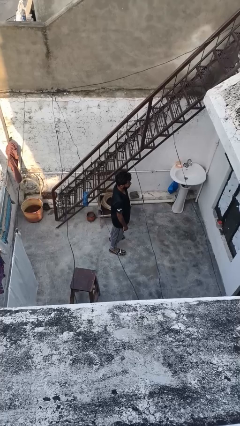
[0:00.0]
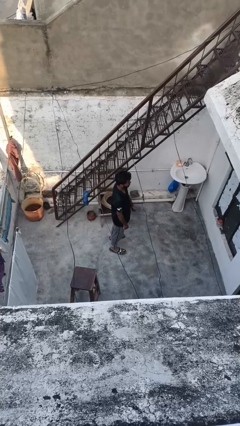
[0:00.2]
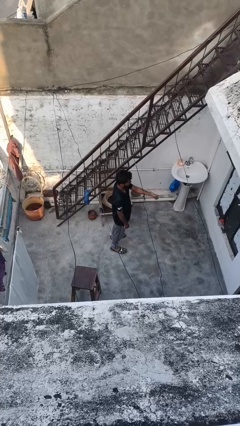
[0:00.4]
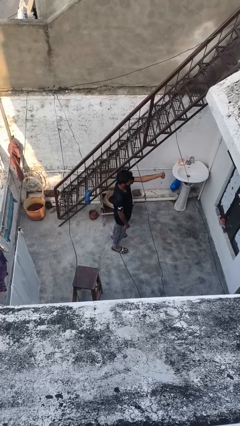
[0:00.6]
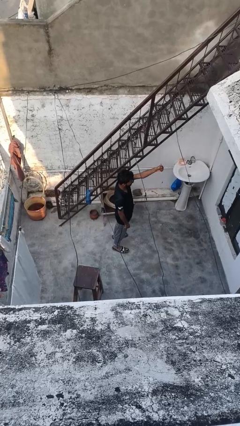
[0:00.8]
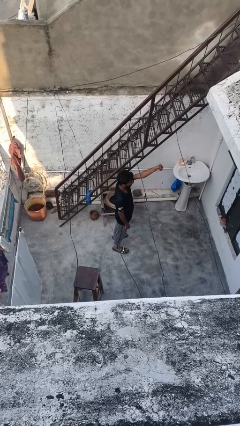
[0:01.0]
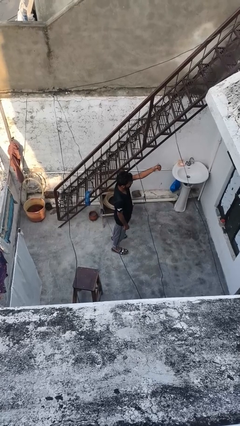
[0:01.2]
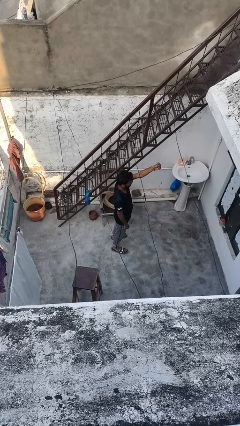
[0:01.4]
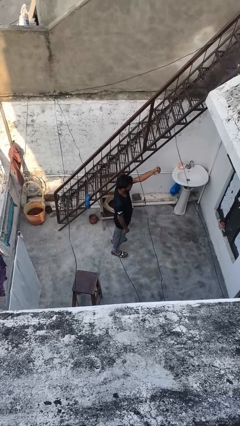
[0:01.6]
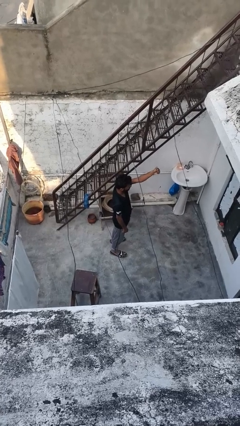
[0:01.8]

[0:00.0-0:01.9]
person gestures thumbs up

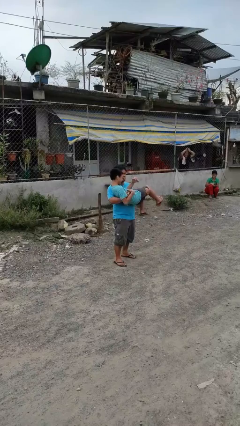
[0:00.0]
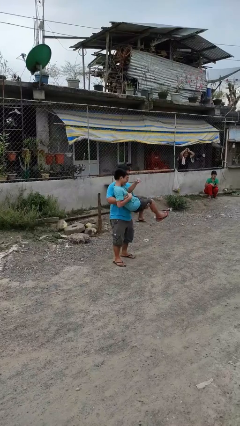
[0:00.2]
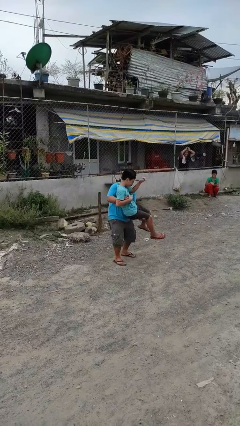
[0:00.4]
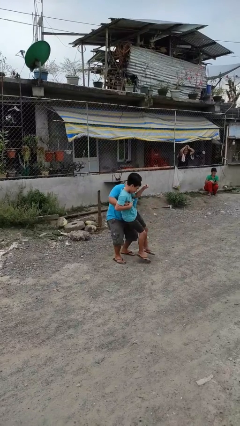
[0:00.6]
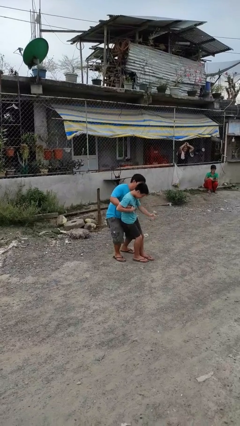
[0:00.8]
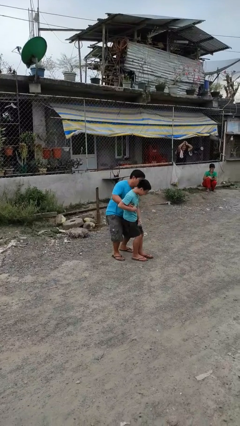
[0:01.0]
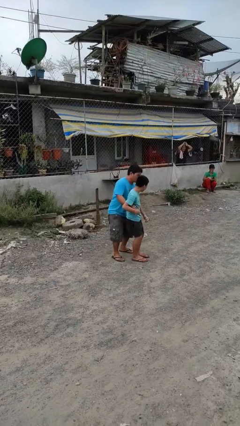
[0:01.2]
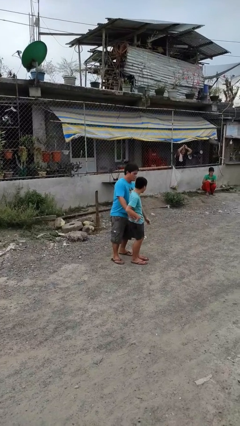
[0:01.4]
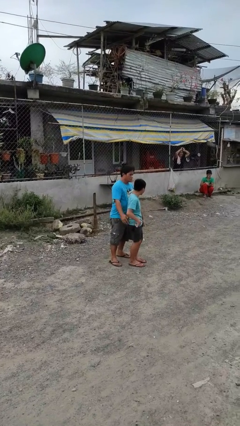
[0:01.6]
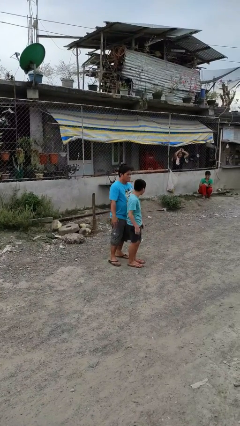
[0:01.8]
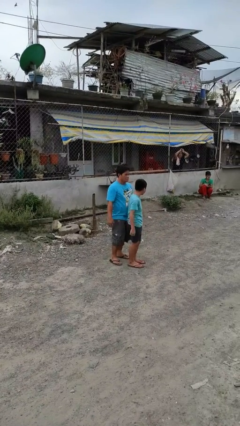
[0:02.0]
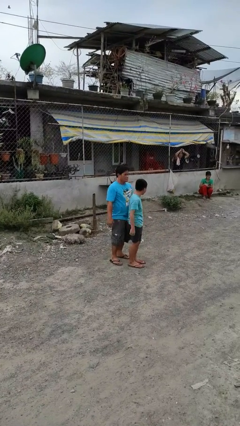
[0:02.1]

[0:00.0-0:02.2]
person puts down person

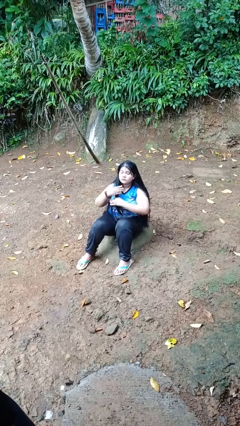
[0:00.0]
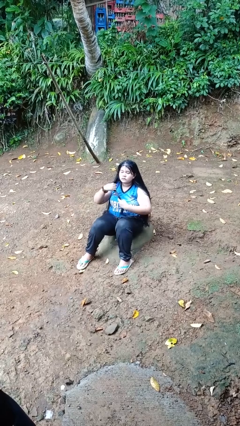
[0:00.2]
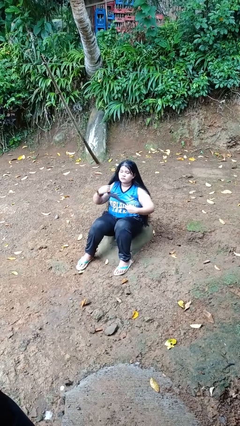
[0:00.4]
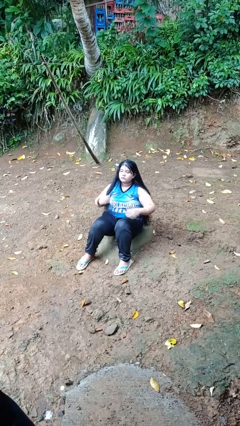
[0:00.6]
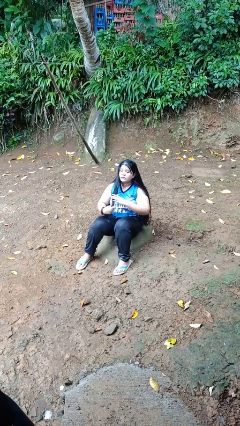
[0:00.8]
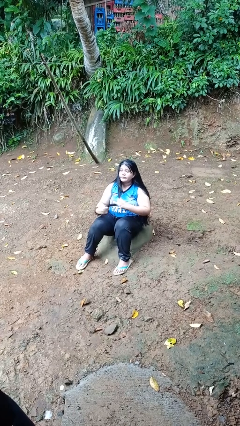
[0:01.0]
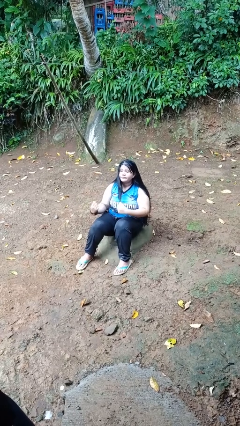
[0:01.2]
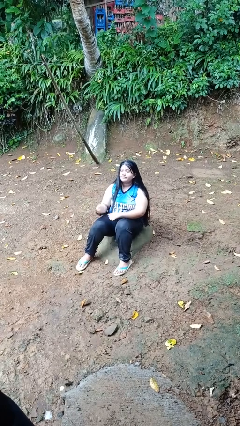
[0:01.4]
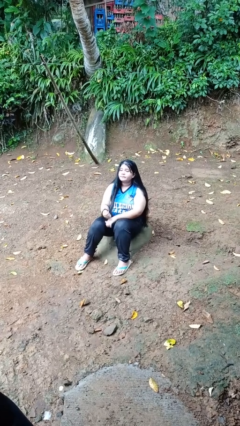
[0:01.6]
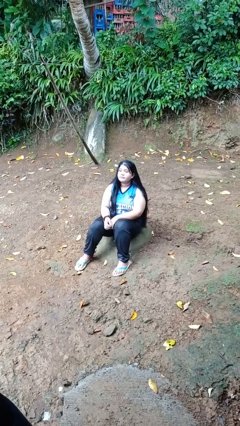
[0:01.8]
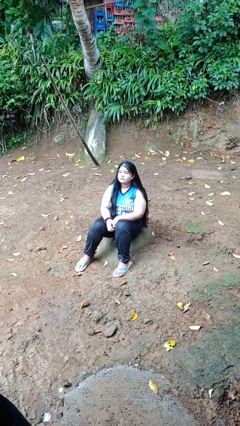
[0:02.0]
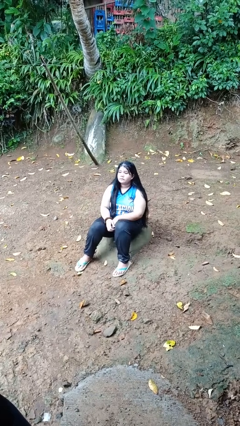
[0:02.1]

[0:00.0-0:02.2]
person strokes hair

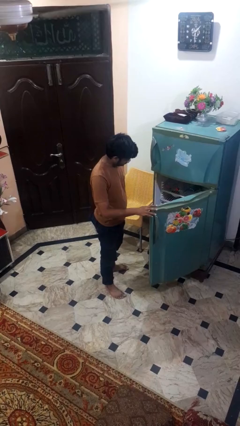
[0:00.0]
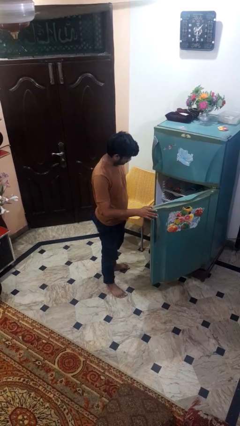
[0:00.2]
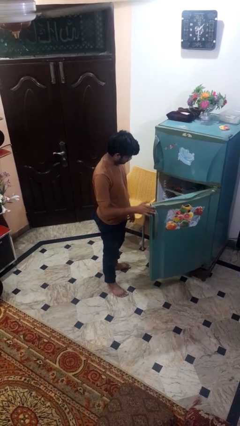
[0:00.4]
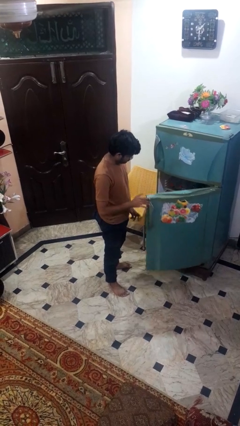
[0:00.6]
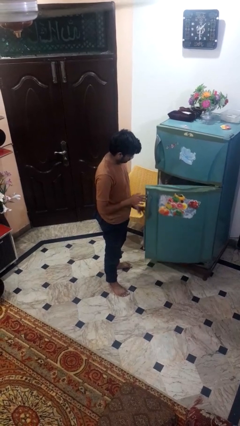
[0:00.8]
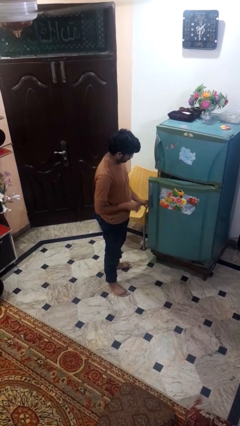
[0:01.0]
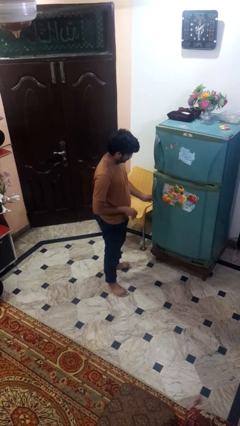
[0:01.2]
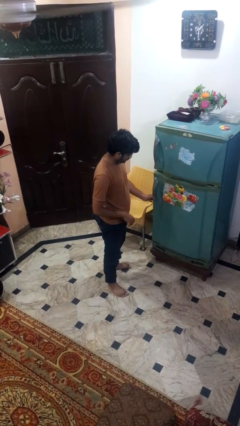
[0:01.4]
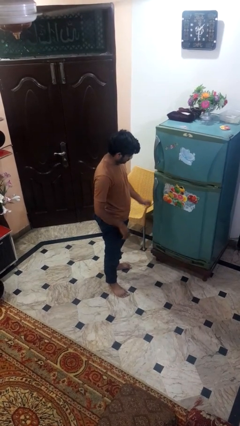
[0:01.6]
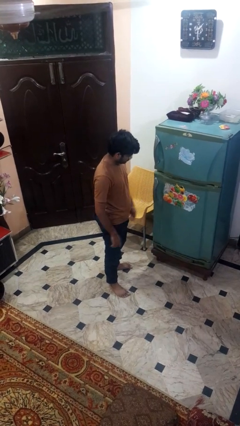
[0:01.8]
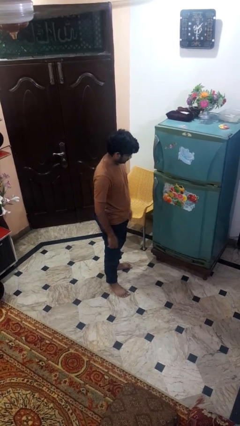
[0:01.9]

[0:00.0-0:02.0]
person closes refrigerator

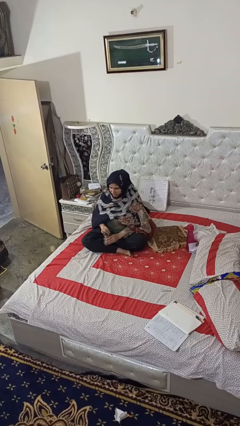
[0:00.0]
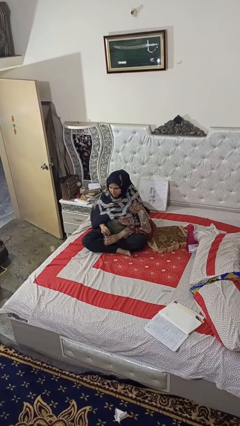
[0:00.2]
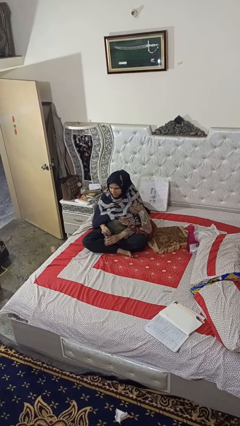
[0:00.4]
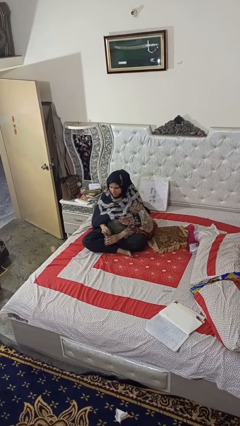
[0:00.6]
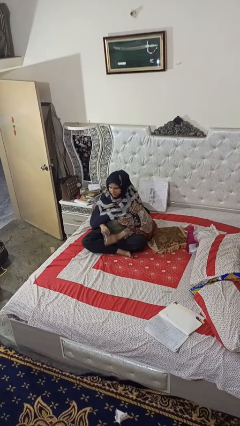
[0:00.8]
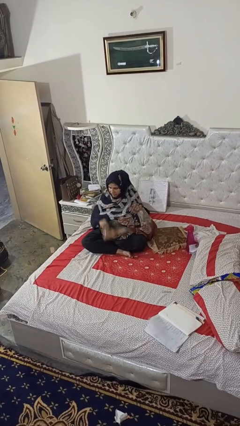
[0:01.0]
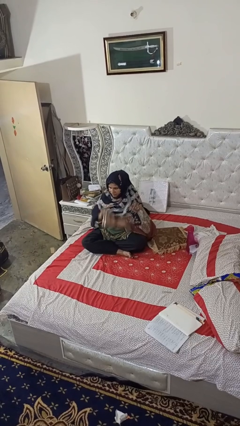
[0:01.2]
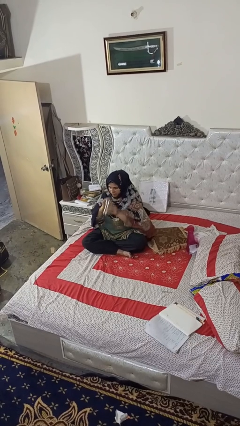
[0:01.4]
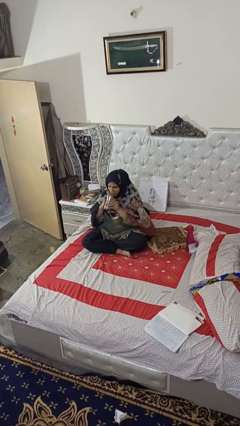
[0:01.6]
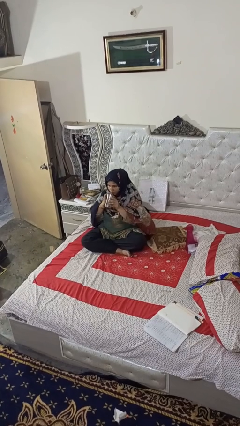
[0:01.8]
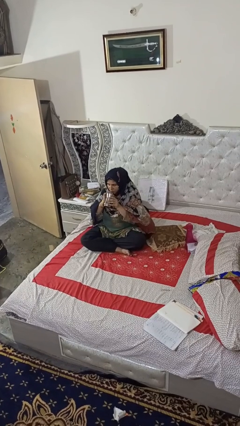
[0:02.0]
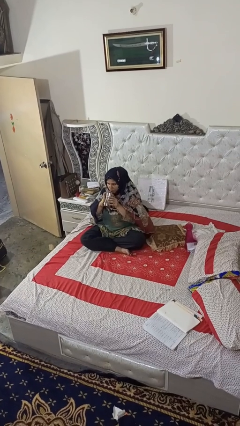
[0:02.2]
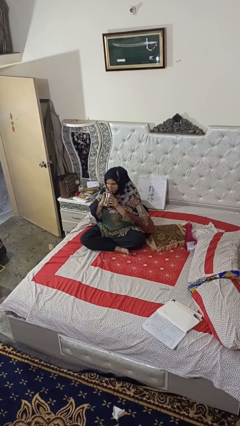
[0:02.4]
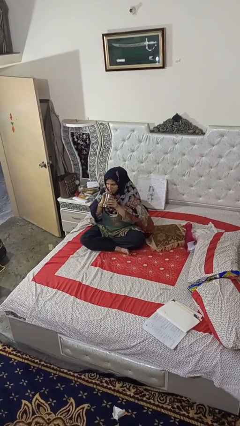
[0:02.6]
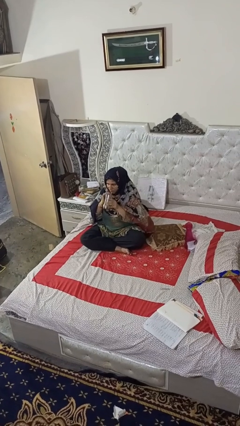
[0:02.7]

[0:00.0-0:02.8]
person drinks from straw

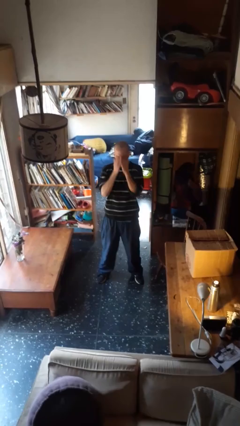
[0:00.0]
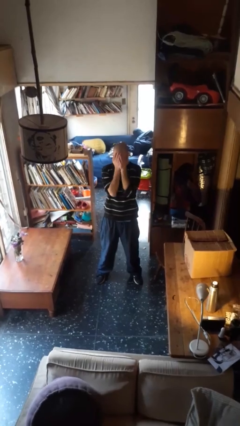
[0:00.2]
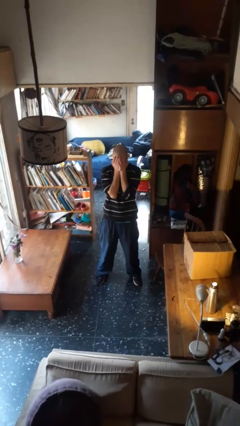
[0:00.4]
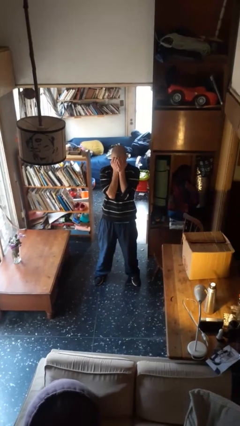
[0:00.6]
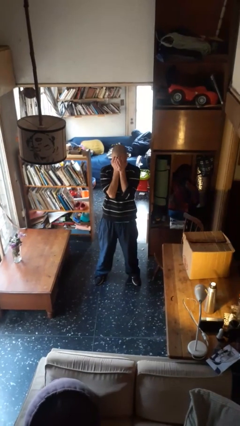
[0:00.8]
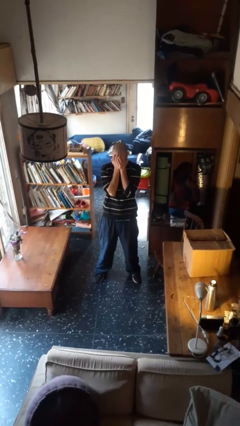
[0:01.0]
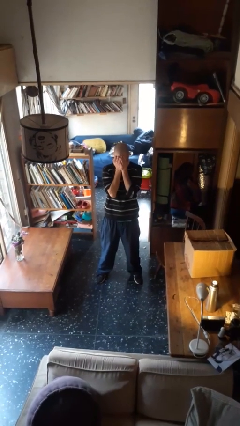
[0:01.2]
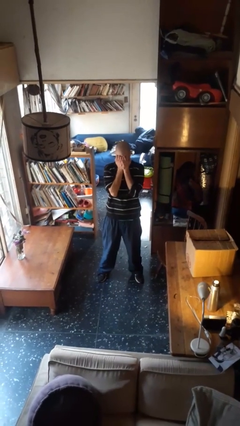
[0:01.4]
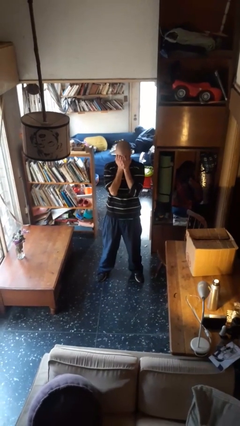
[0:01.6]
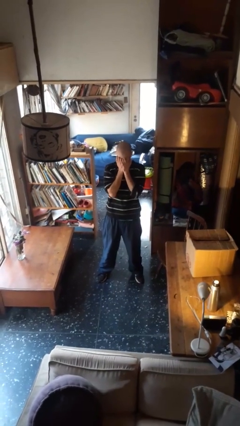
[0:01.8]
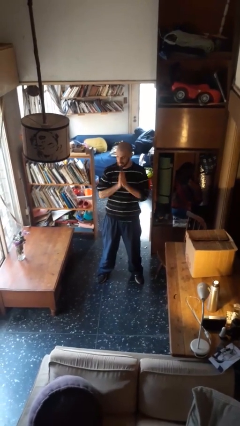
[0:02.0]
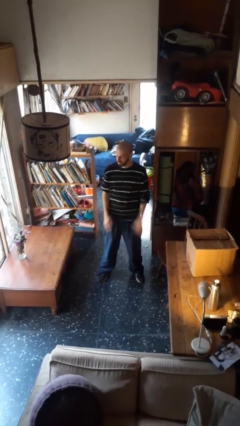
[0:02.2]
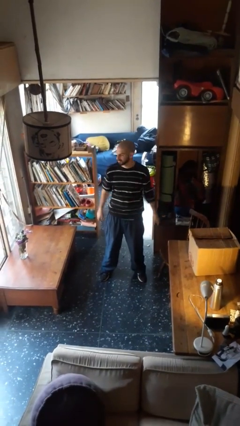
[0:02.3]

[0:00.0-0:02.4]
person covers face with hands

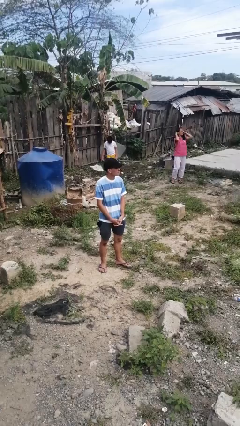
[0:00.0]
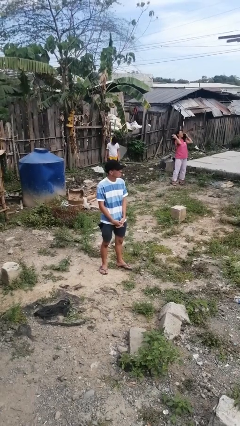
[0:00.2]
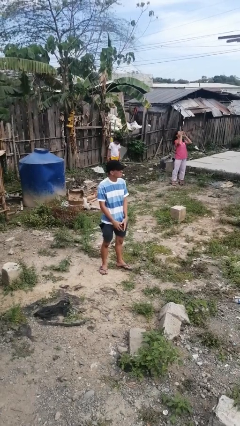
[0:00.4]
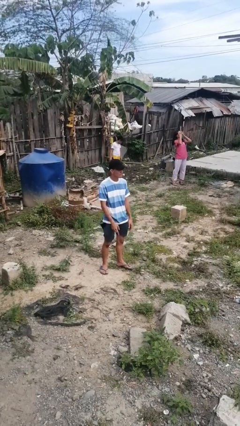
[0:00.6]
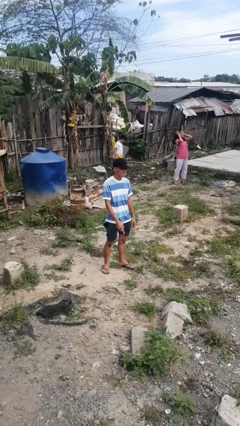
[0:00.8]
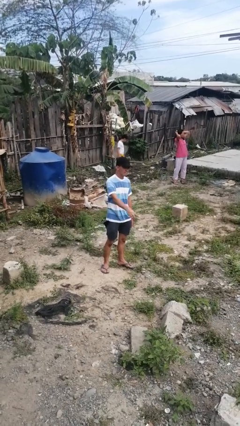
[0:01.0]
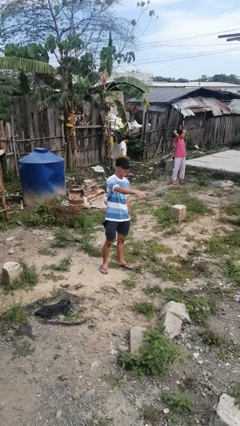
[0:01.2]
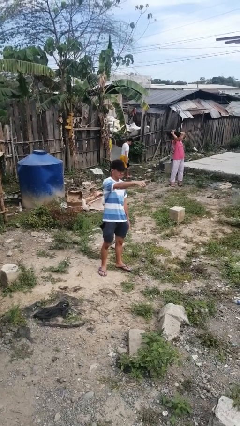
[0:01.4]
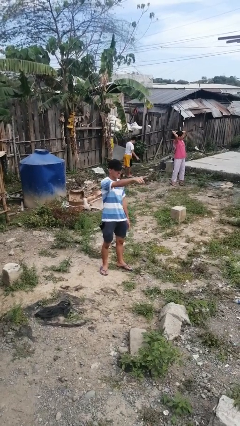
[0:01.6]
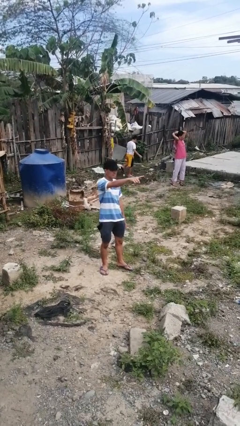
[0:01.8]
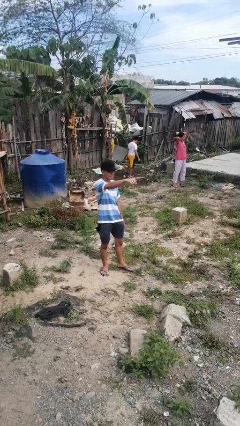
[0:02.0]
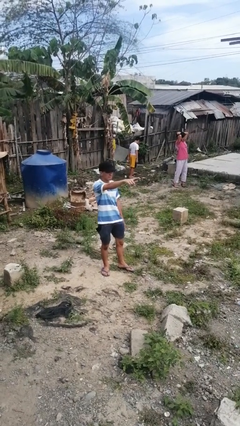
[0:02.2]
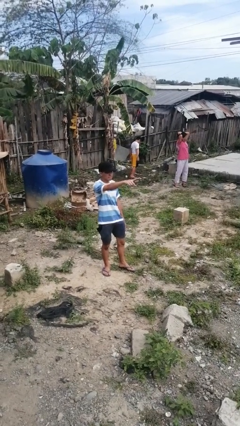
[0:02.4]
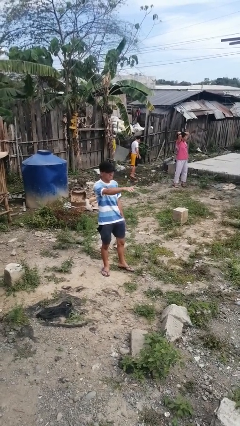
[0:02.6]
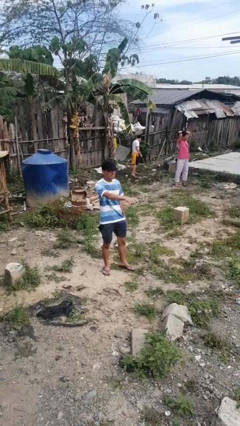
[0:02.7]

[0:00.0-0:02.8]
person points at person

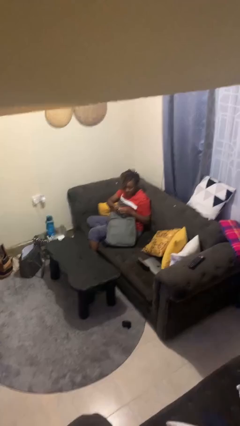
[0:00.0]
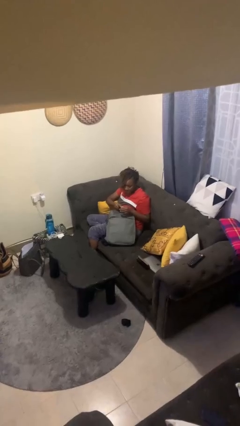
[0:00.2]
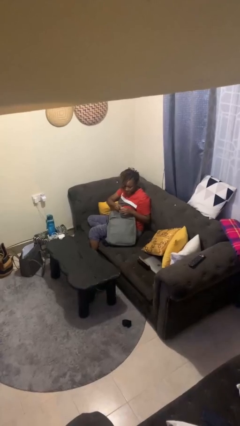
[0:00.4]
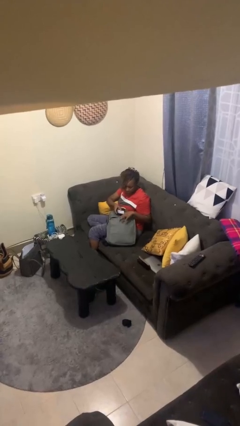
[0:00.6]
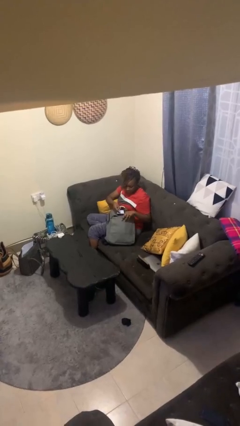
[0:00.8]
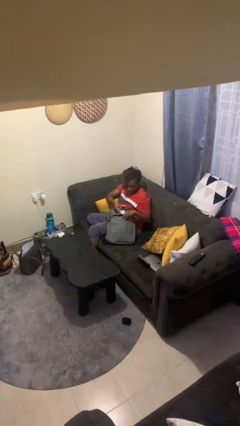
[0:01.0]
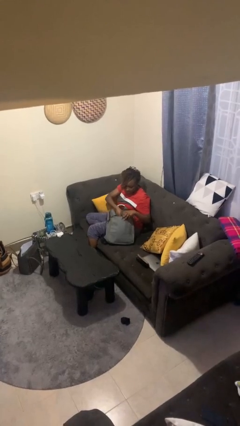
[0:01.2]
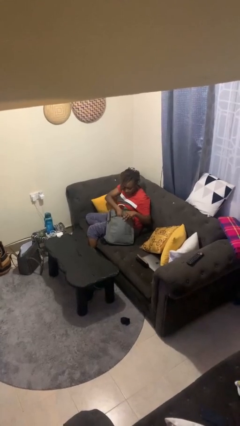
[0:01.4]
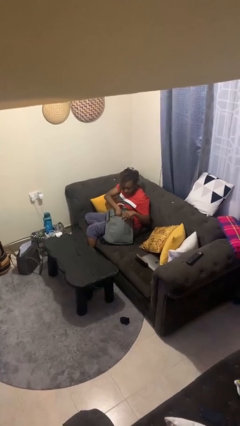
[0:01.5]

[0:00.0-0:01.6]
person puts object into backpack
